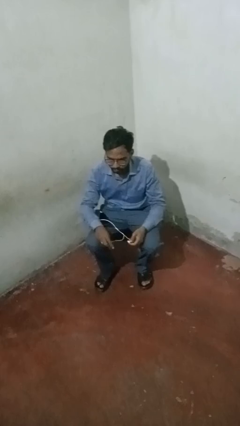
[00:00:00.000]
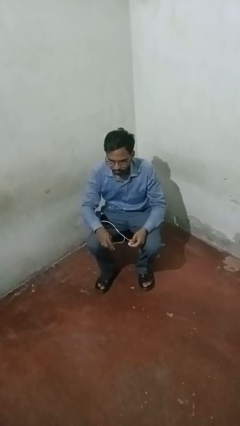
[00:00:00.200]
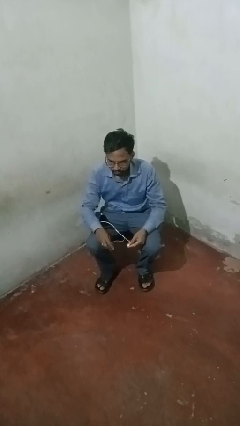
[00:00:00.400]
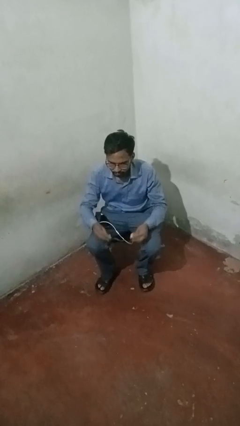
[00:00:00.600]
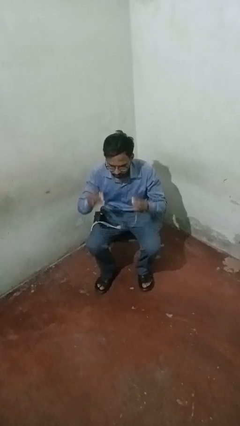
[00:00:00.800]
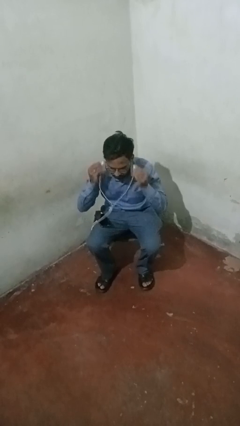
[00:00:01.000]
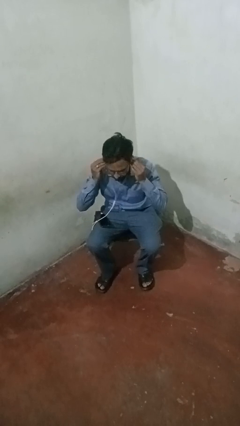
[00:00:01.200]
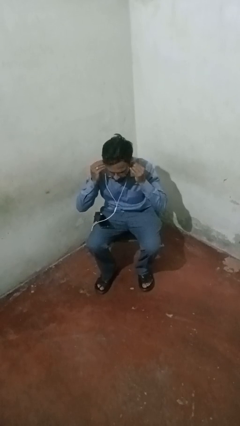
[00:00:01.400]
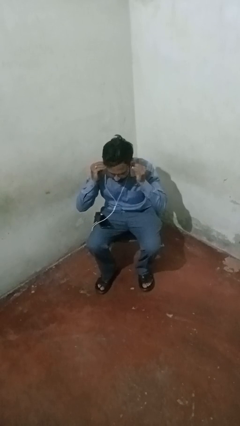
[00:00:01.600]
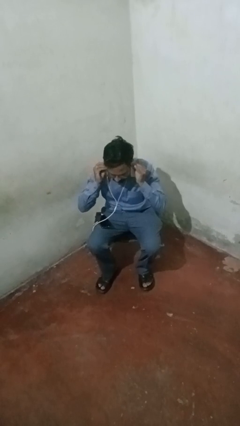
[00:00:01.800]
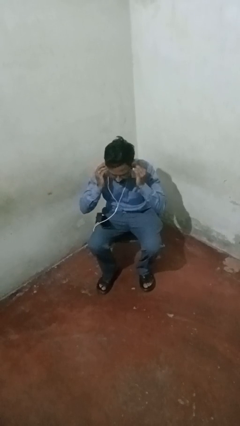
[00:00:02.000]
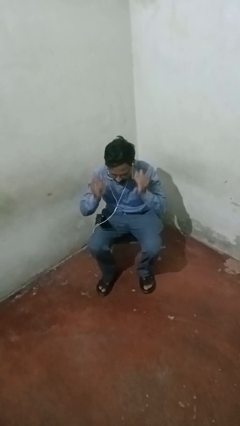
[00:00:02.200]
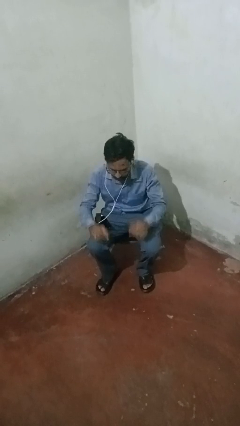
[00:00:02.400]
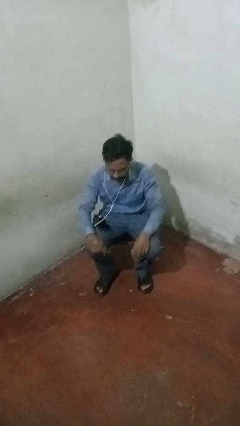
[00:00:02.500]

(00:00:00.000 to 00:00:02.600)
person puts on headphones

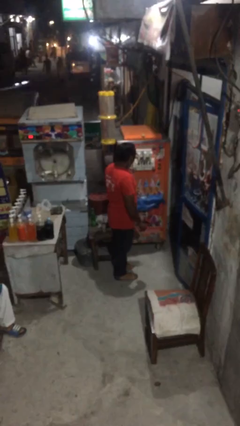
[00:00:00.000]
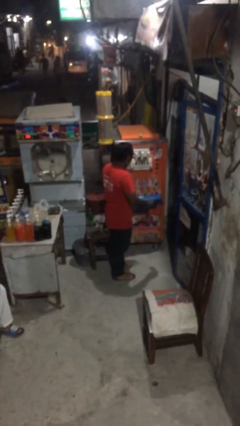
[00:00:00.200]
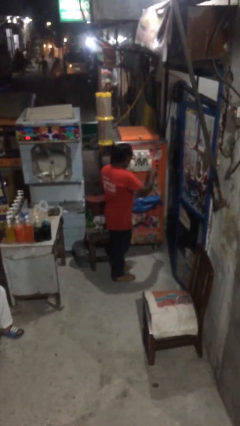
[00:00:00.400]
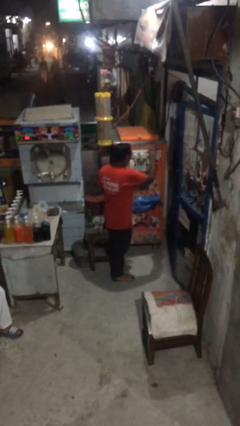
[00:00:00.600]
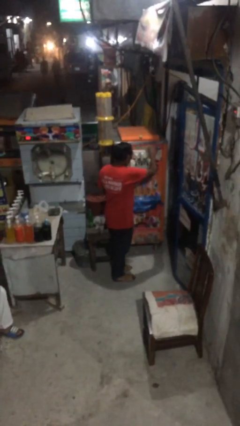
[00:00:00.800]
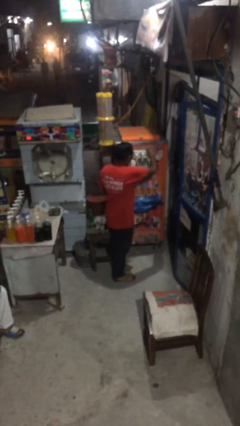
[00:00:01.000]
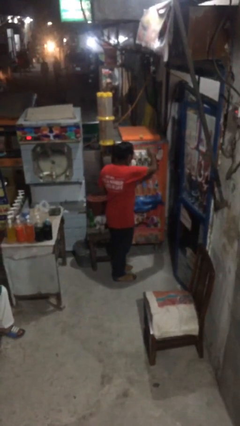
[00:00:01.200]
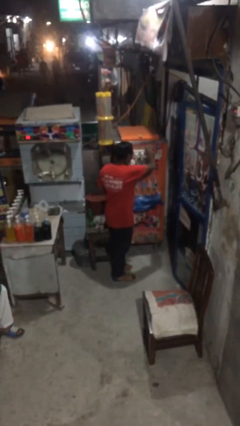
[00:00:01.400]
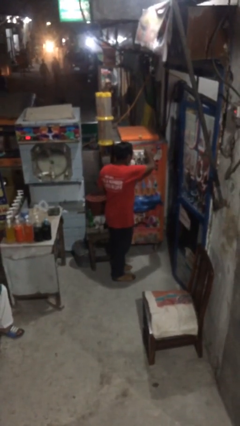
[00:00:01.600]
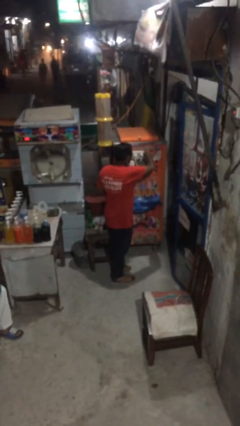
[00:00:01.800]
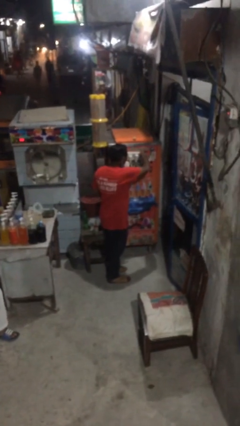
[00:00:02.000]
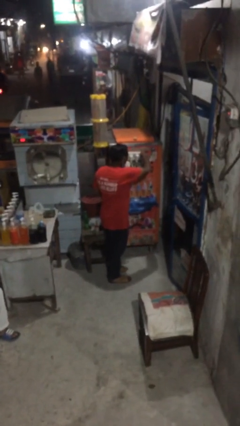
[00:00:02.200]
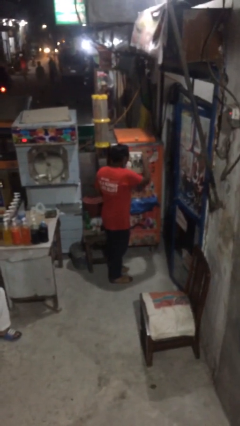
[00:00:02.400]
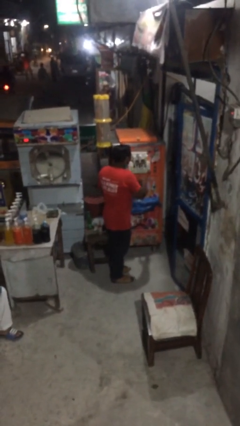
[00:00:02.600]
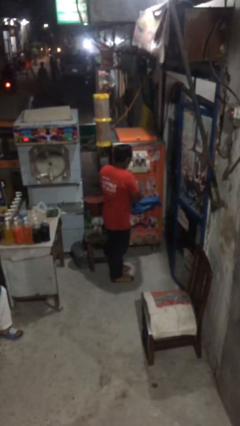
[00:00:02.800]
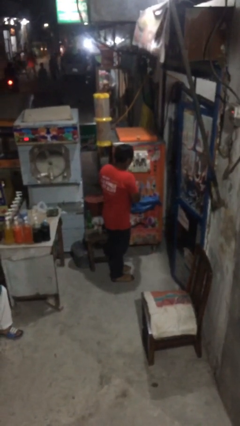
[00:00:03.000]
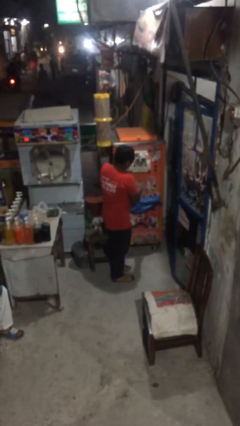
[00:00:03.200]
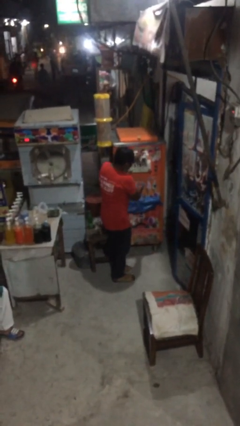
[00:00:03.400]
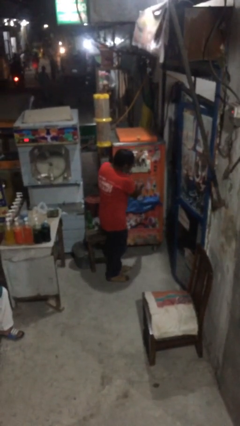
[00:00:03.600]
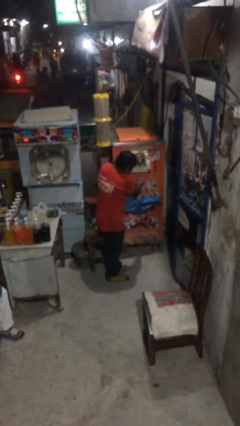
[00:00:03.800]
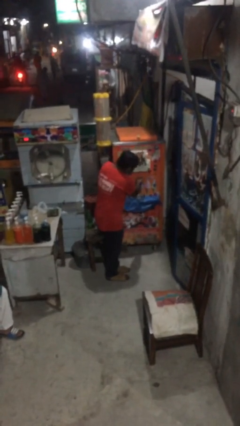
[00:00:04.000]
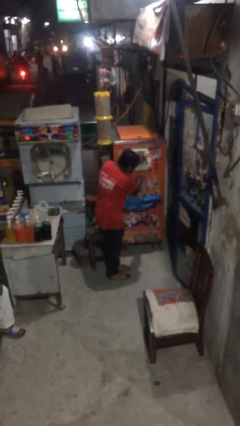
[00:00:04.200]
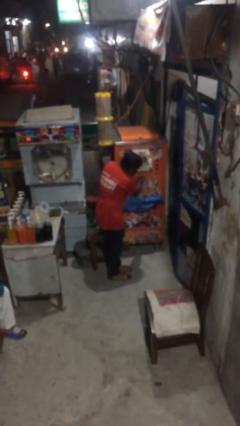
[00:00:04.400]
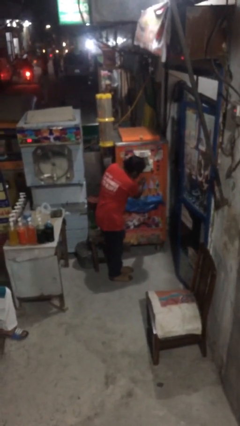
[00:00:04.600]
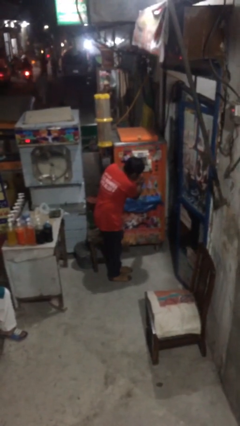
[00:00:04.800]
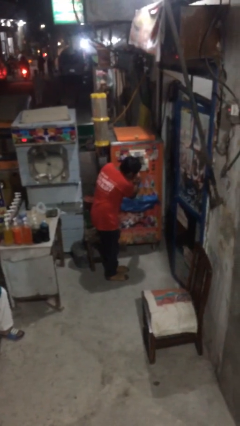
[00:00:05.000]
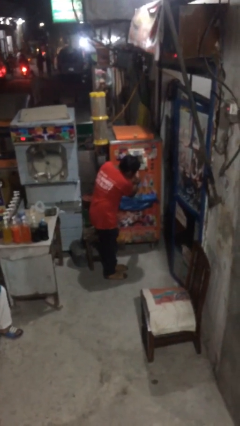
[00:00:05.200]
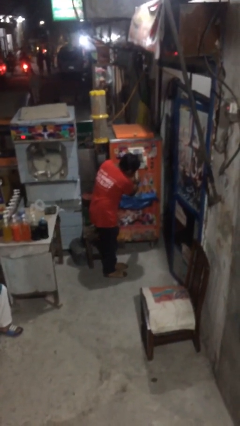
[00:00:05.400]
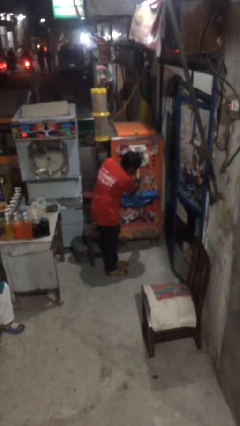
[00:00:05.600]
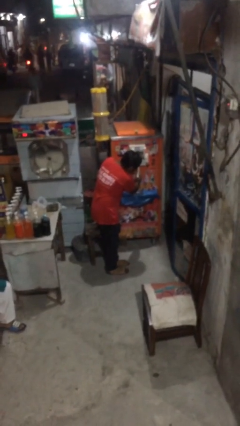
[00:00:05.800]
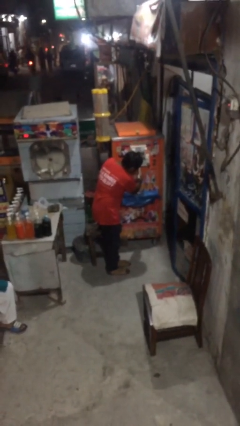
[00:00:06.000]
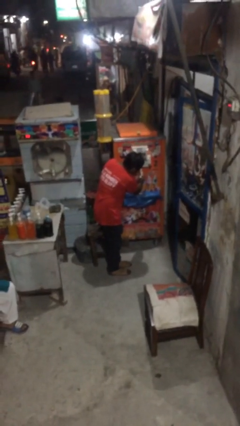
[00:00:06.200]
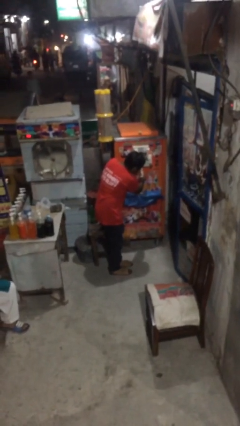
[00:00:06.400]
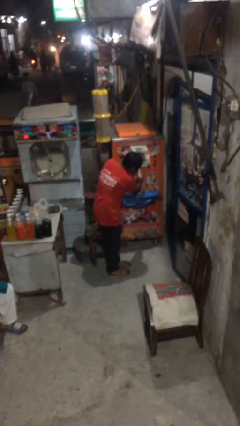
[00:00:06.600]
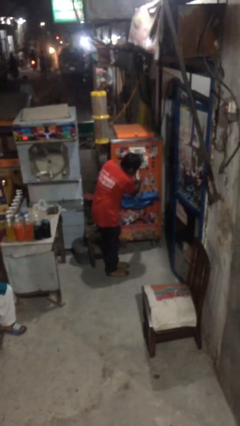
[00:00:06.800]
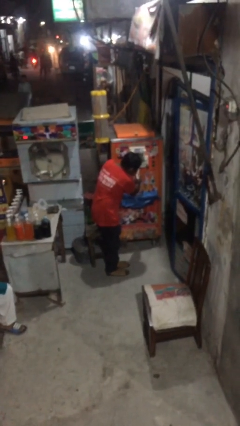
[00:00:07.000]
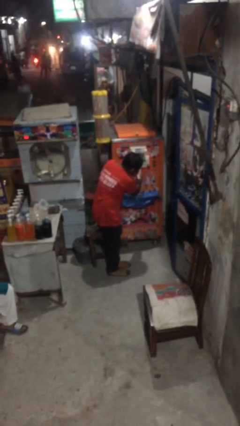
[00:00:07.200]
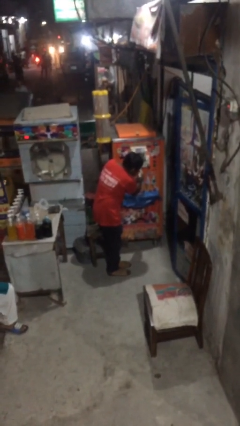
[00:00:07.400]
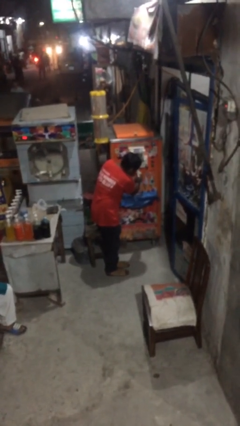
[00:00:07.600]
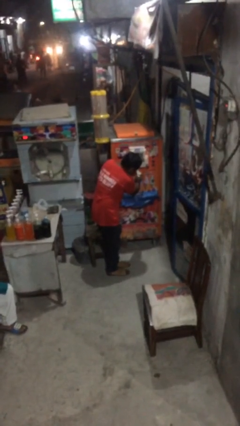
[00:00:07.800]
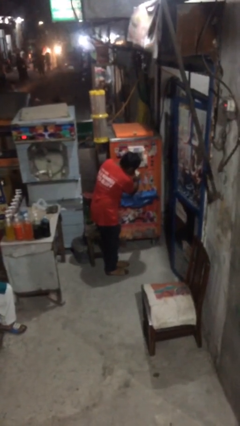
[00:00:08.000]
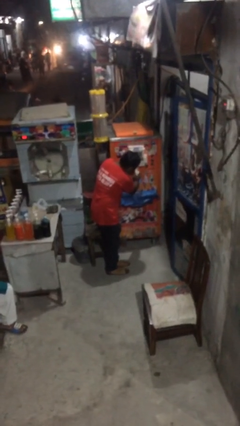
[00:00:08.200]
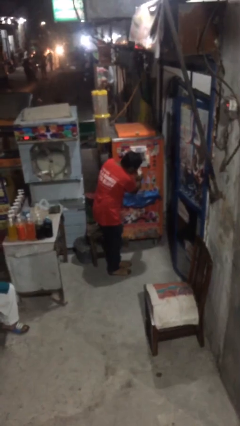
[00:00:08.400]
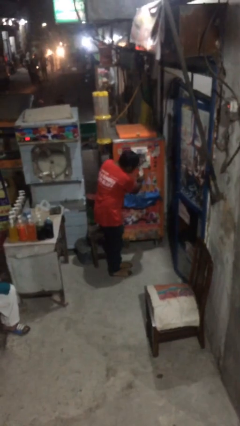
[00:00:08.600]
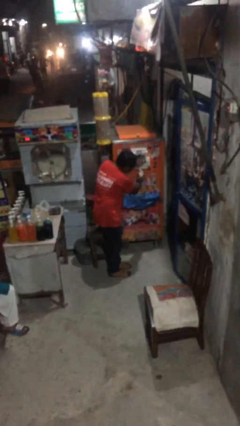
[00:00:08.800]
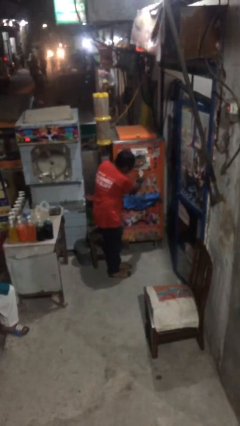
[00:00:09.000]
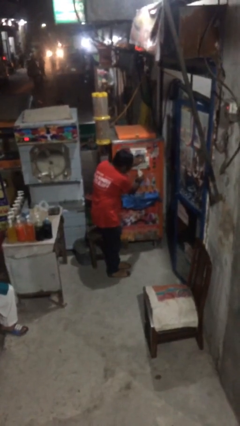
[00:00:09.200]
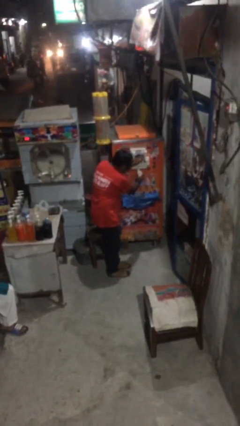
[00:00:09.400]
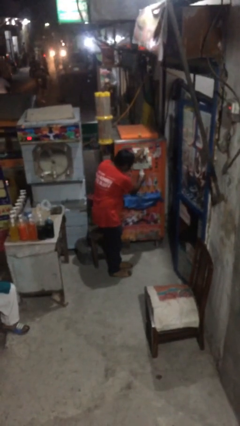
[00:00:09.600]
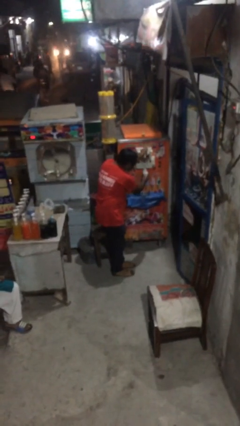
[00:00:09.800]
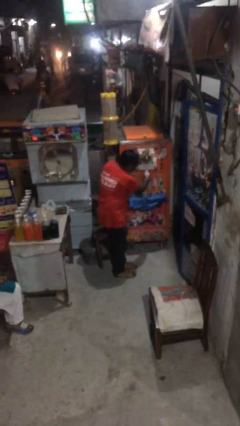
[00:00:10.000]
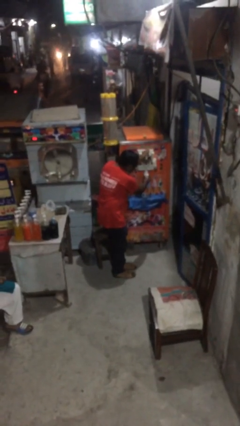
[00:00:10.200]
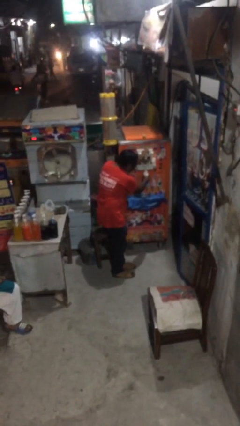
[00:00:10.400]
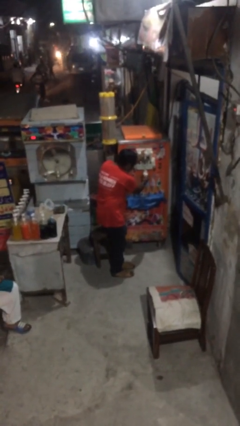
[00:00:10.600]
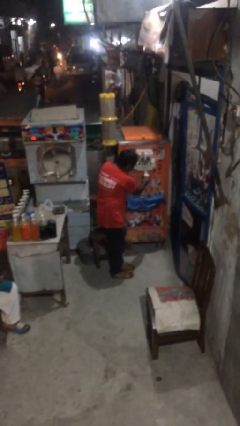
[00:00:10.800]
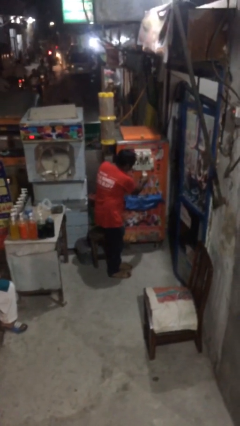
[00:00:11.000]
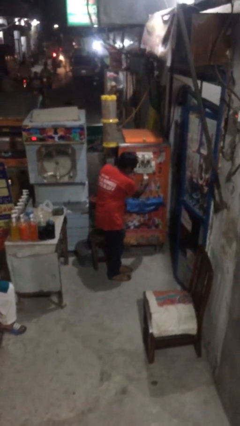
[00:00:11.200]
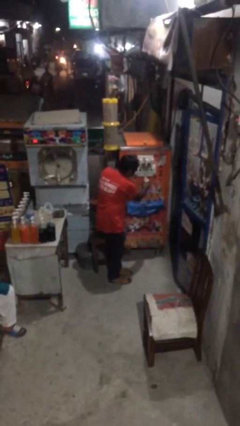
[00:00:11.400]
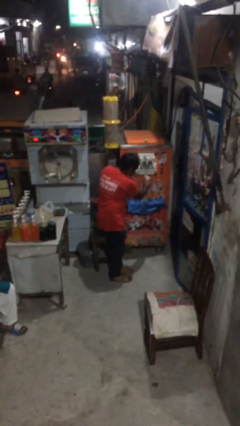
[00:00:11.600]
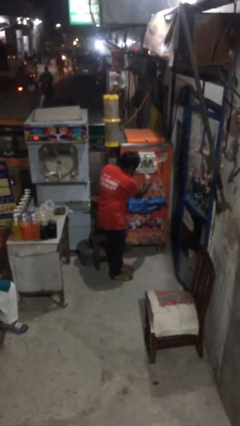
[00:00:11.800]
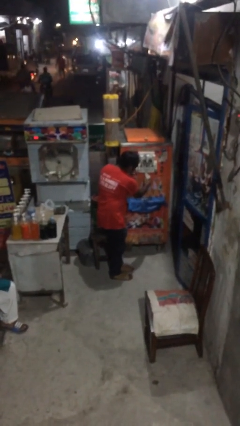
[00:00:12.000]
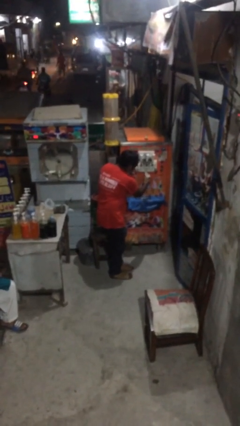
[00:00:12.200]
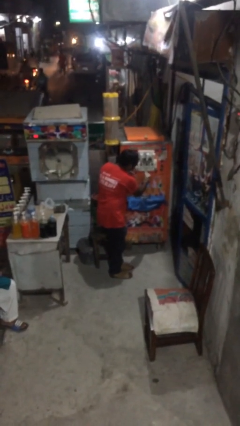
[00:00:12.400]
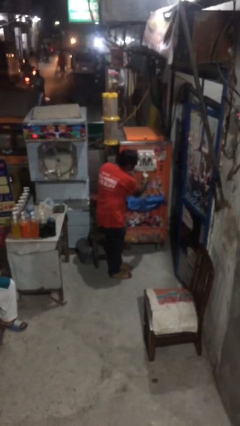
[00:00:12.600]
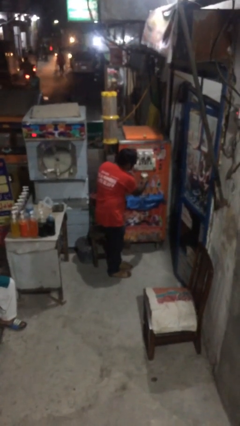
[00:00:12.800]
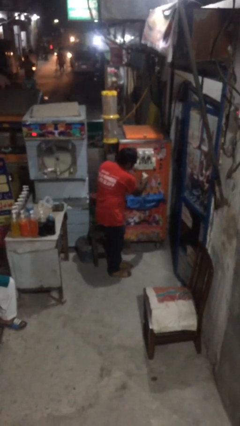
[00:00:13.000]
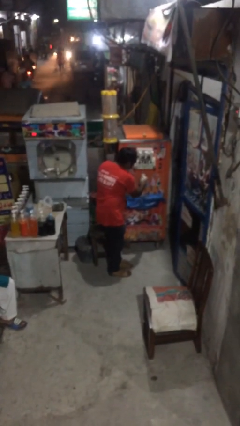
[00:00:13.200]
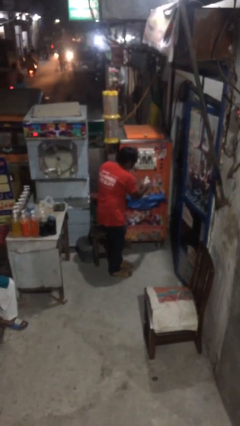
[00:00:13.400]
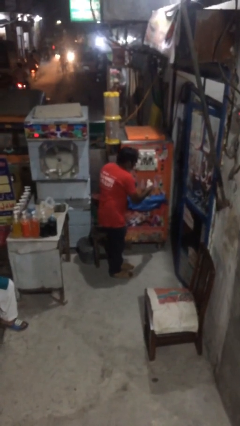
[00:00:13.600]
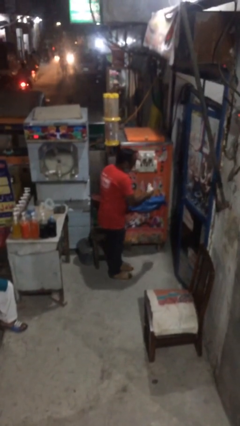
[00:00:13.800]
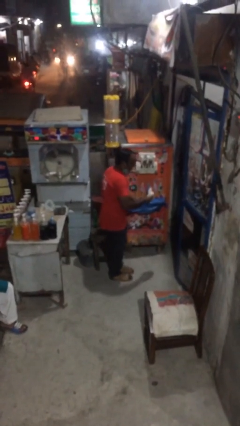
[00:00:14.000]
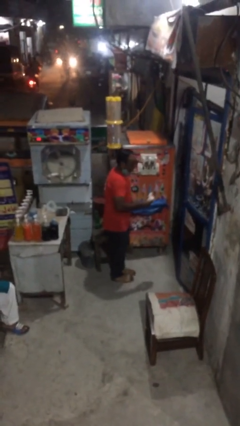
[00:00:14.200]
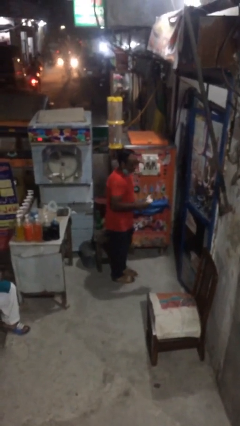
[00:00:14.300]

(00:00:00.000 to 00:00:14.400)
person purchases from machine

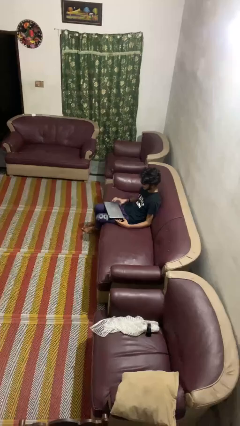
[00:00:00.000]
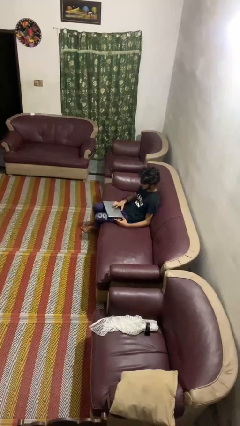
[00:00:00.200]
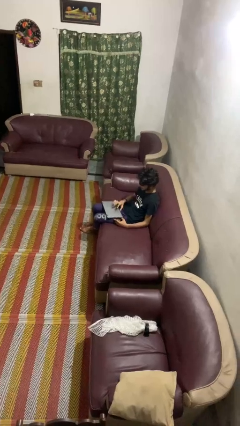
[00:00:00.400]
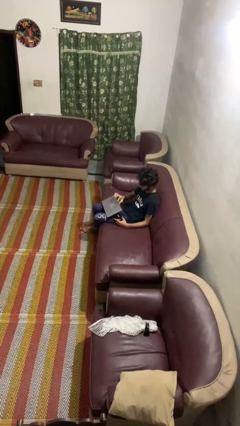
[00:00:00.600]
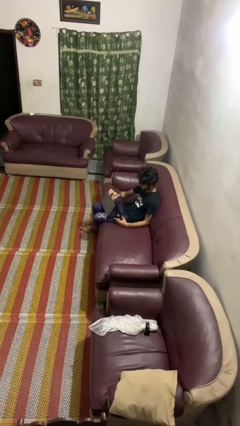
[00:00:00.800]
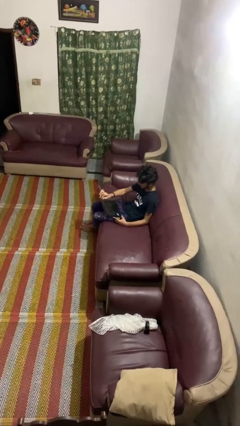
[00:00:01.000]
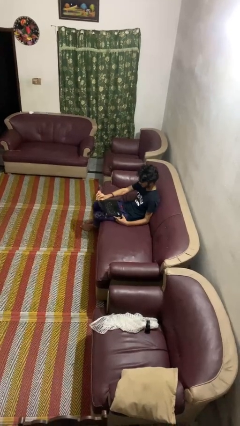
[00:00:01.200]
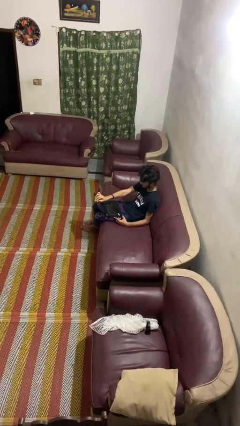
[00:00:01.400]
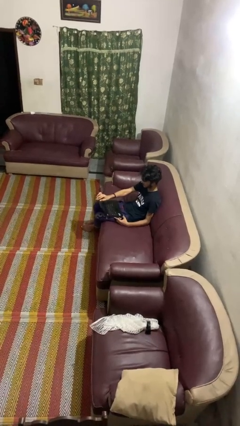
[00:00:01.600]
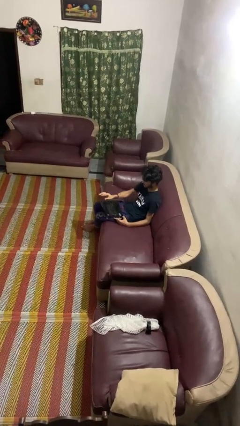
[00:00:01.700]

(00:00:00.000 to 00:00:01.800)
person opens laptop
